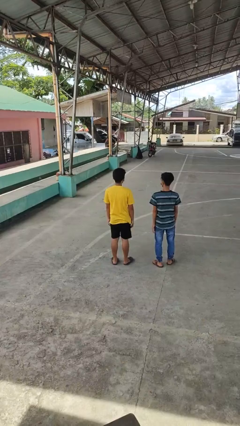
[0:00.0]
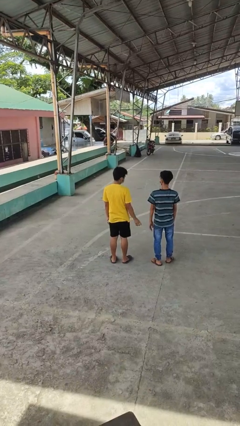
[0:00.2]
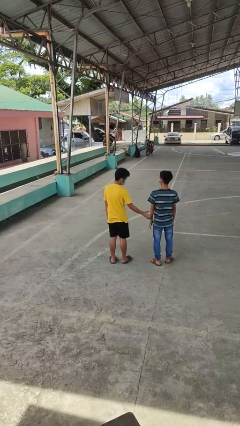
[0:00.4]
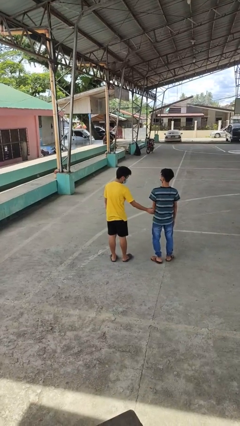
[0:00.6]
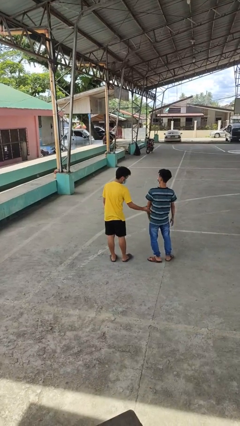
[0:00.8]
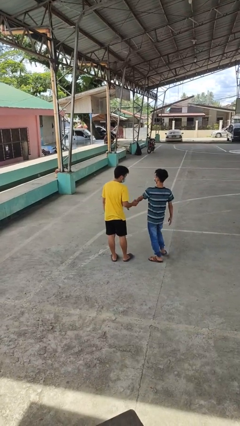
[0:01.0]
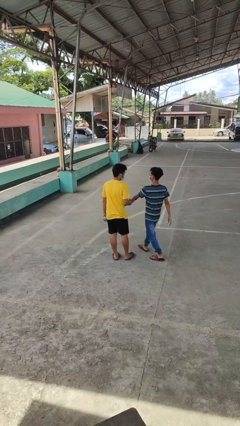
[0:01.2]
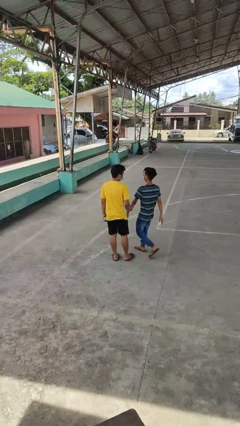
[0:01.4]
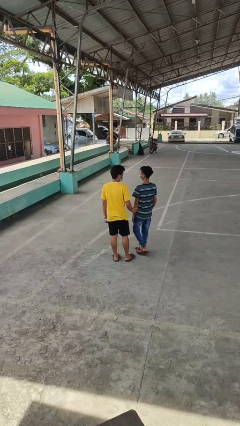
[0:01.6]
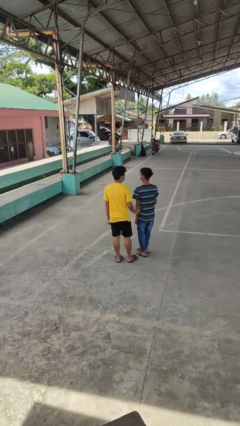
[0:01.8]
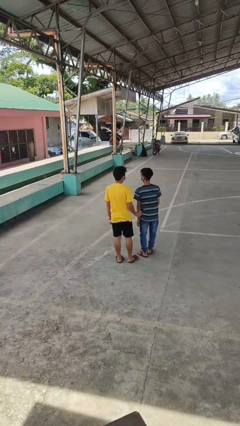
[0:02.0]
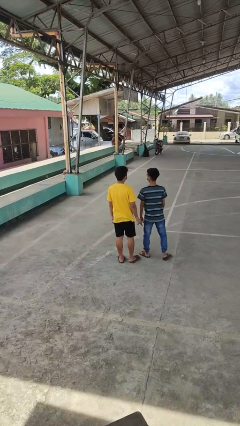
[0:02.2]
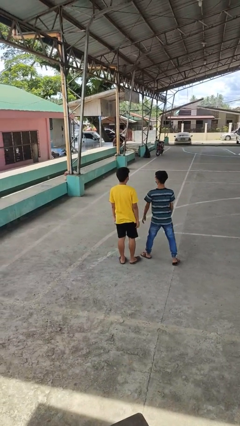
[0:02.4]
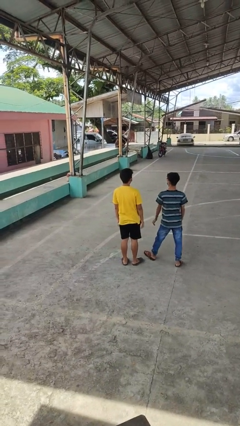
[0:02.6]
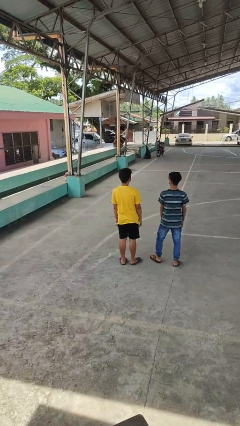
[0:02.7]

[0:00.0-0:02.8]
person grabs person by forearm

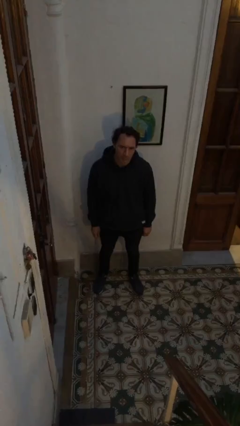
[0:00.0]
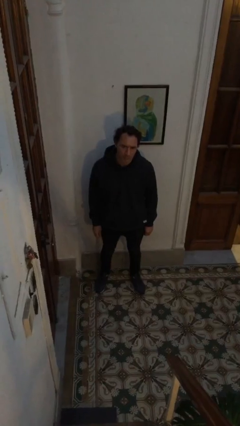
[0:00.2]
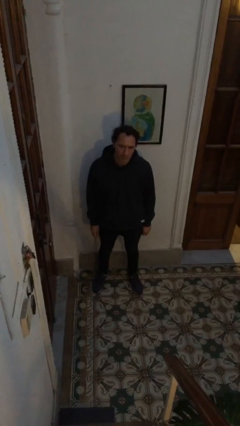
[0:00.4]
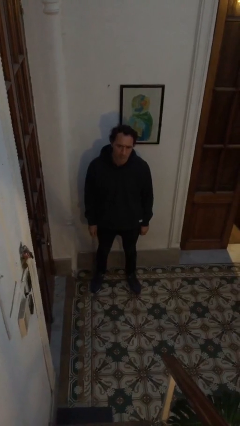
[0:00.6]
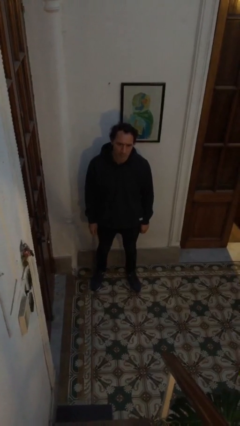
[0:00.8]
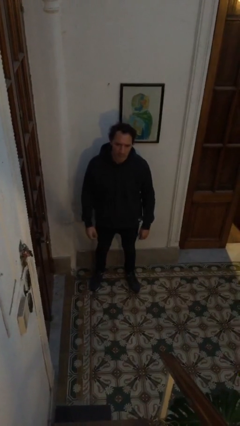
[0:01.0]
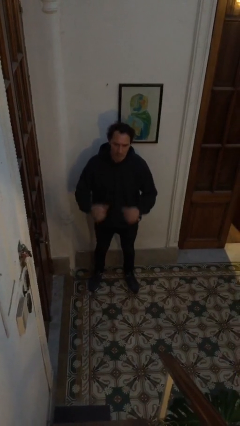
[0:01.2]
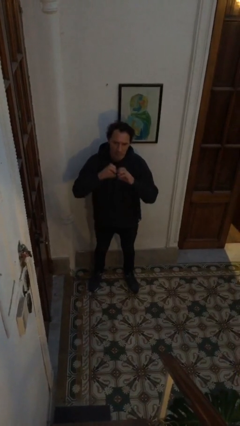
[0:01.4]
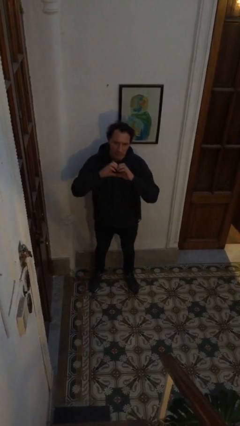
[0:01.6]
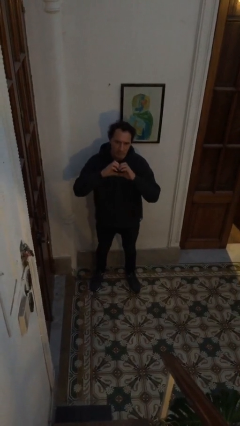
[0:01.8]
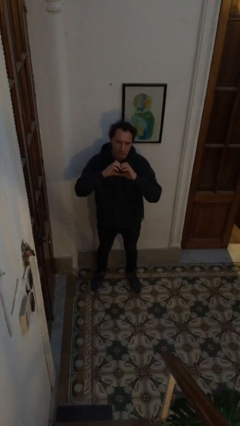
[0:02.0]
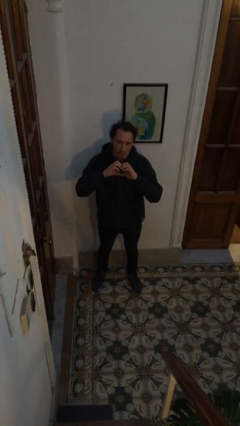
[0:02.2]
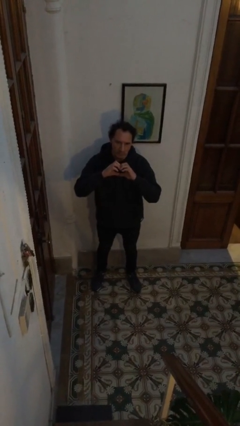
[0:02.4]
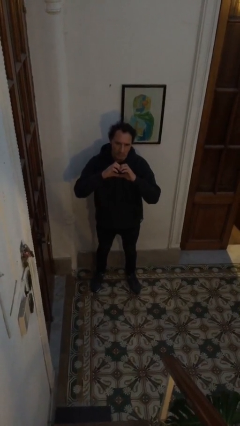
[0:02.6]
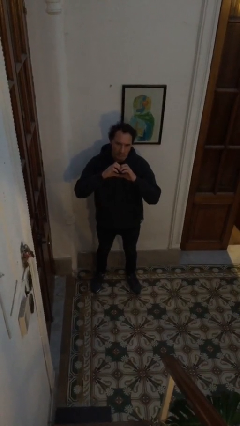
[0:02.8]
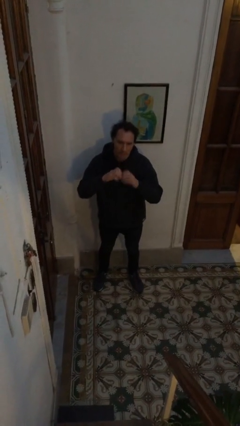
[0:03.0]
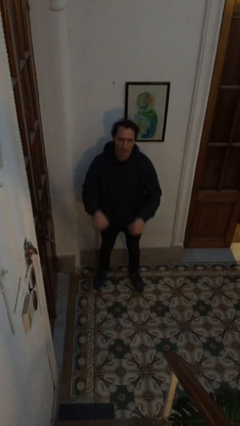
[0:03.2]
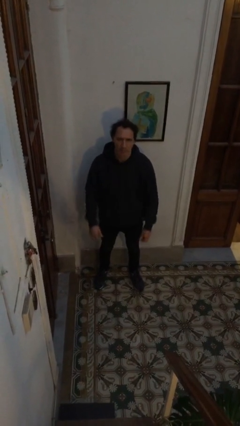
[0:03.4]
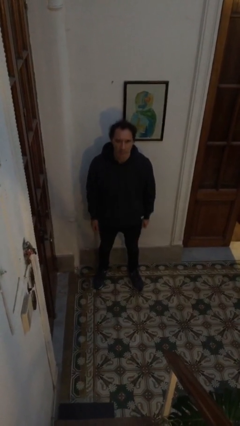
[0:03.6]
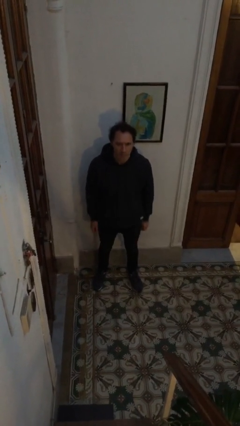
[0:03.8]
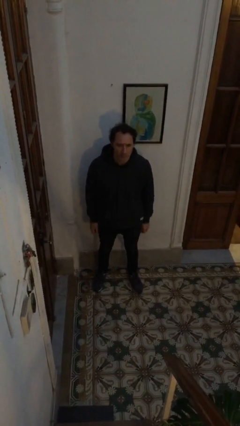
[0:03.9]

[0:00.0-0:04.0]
person gestures heart

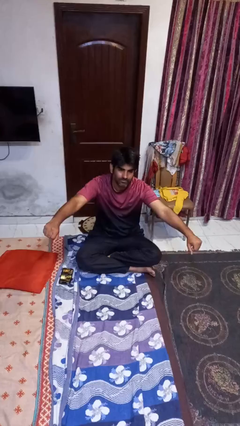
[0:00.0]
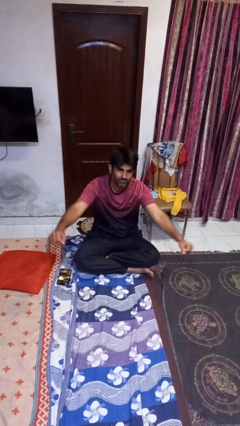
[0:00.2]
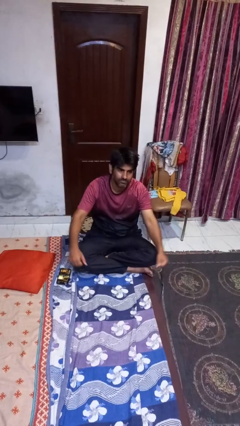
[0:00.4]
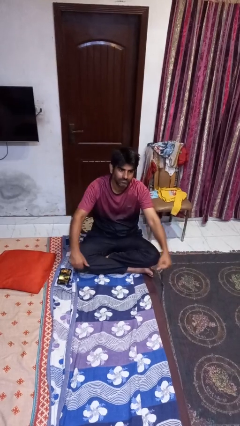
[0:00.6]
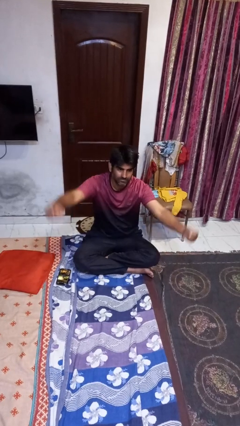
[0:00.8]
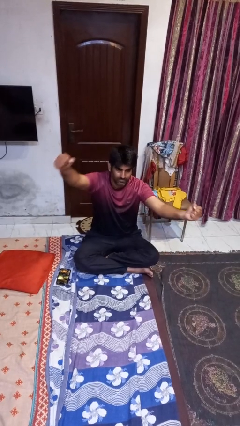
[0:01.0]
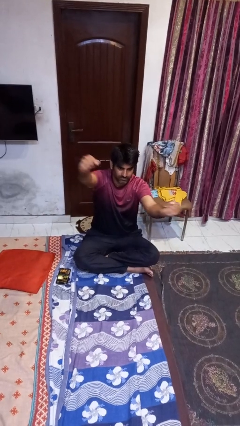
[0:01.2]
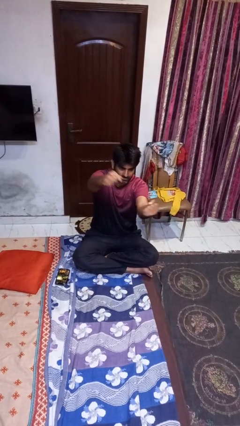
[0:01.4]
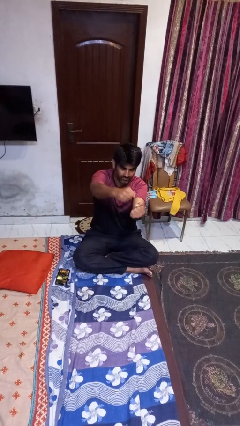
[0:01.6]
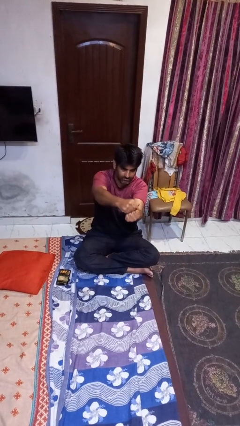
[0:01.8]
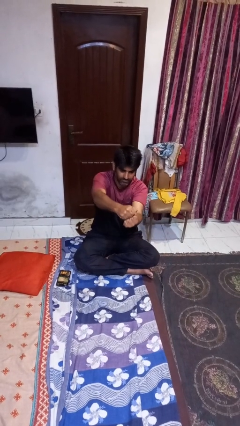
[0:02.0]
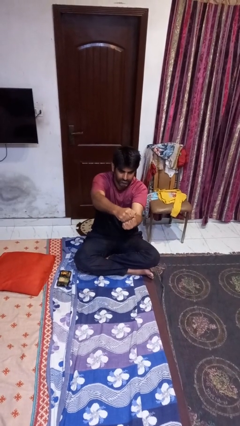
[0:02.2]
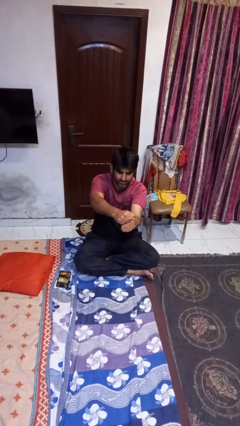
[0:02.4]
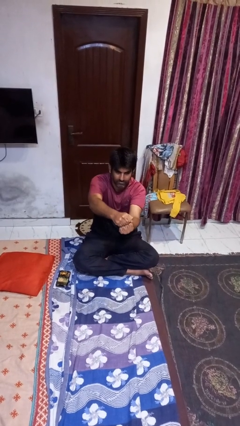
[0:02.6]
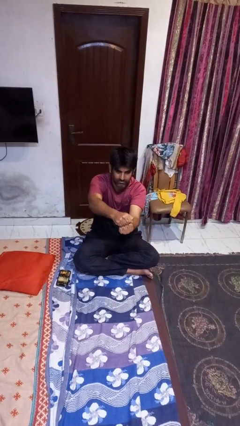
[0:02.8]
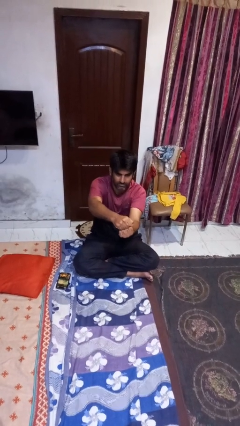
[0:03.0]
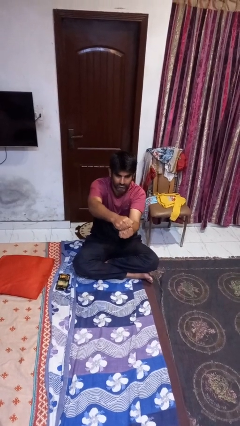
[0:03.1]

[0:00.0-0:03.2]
person gestures zoom in

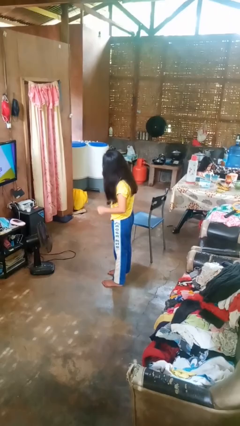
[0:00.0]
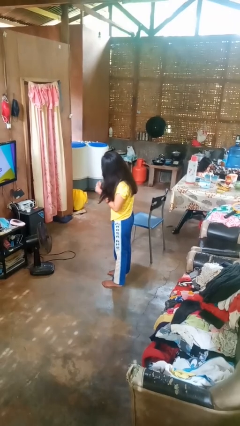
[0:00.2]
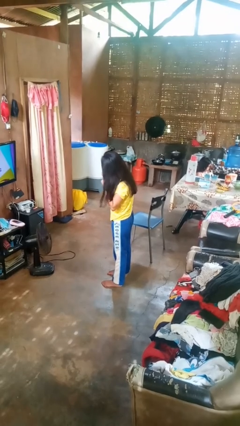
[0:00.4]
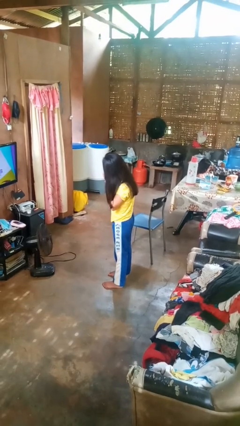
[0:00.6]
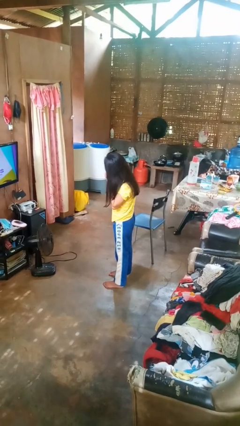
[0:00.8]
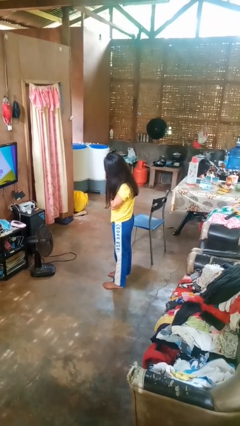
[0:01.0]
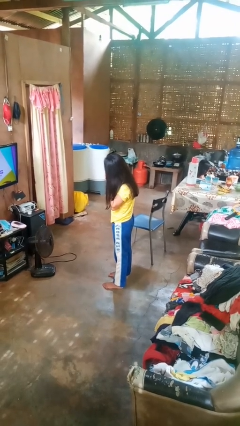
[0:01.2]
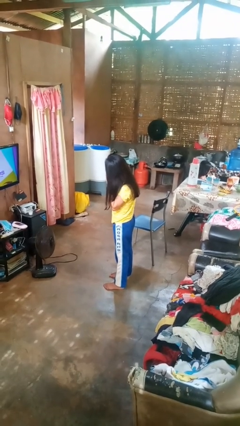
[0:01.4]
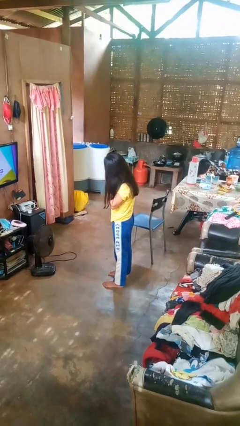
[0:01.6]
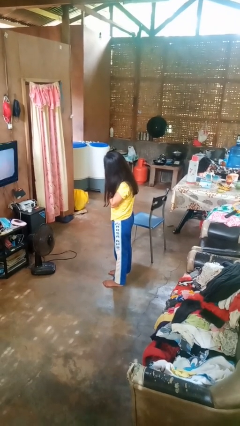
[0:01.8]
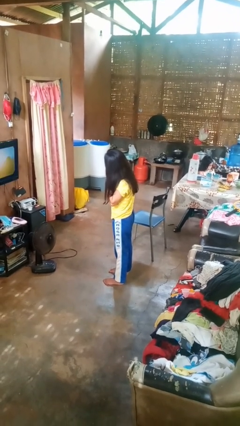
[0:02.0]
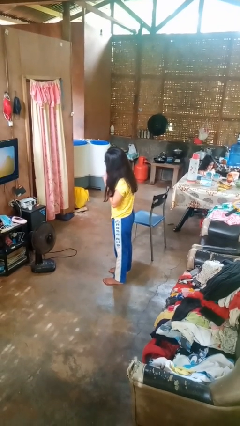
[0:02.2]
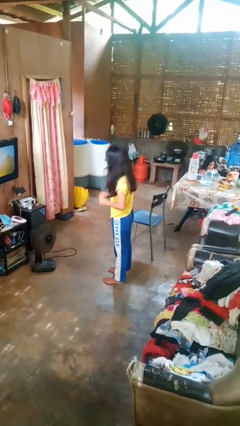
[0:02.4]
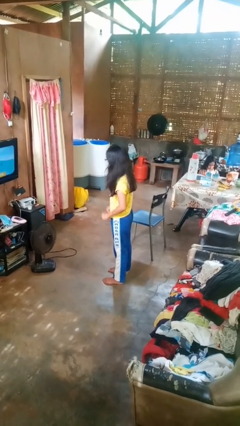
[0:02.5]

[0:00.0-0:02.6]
person puts on earrings

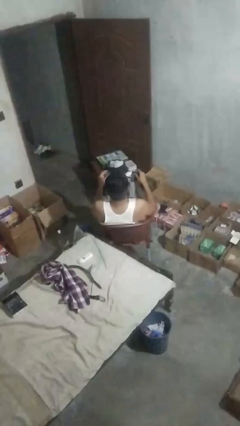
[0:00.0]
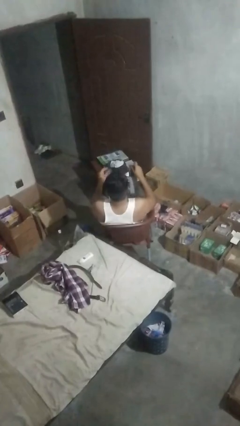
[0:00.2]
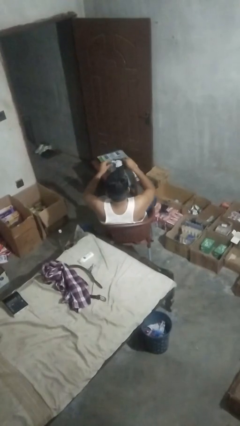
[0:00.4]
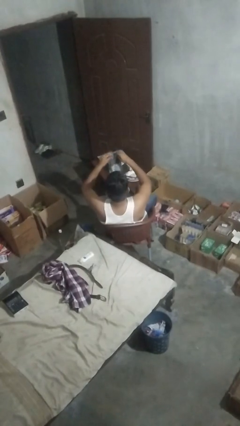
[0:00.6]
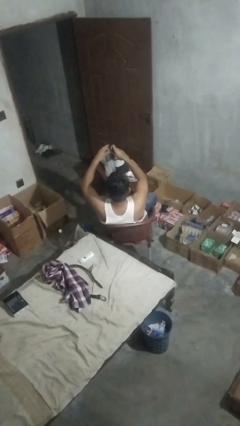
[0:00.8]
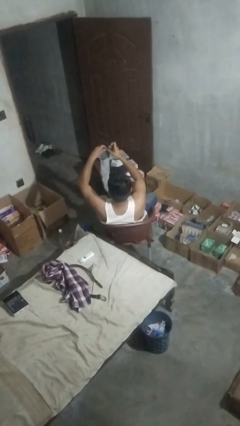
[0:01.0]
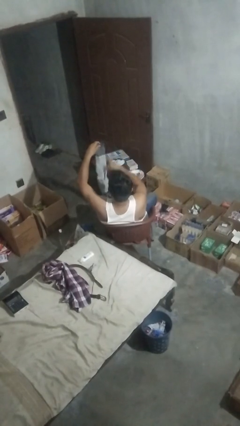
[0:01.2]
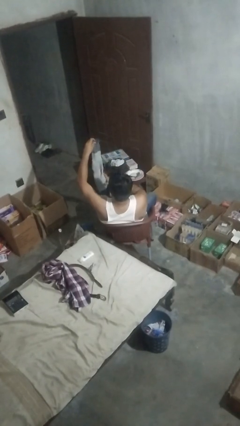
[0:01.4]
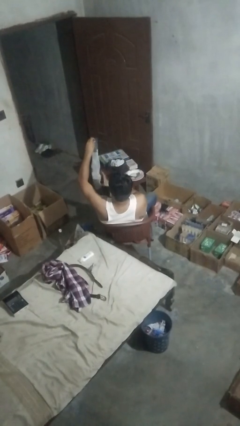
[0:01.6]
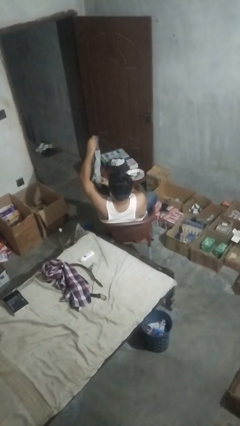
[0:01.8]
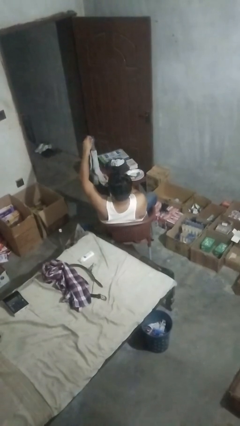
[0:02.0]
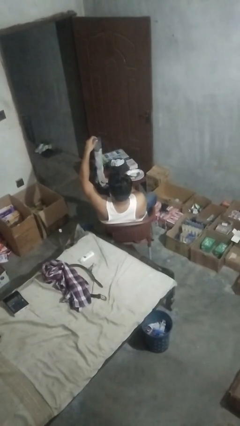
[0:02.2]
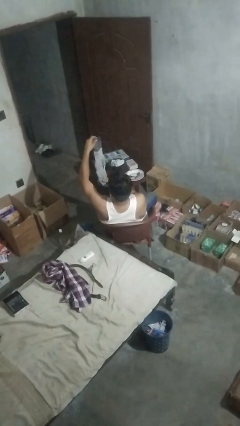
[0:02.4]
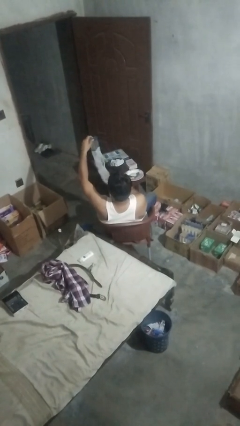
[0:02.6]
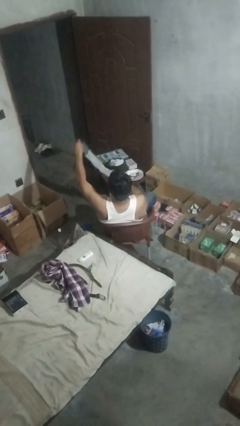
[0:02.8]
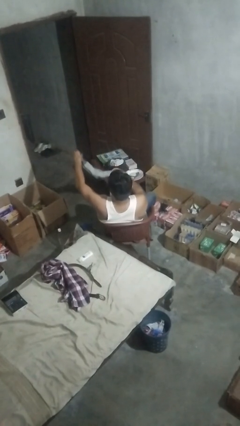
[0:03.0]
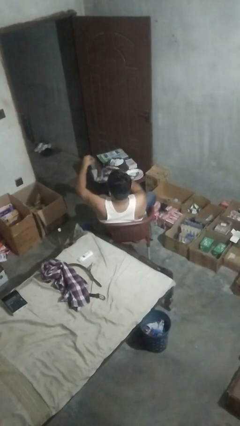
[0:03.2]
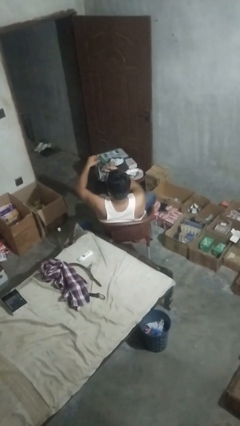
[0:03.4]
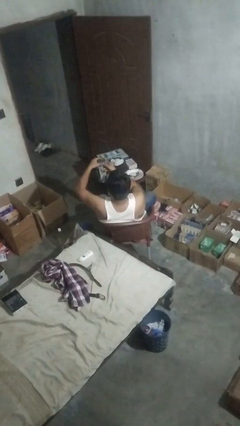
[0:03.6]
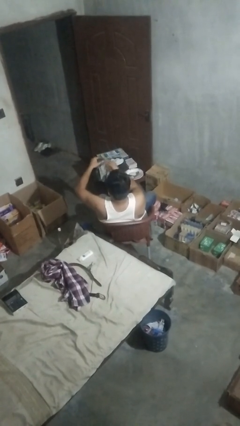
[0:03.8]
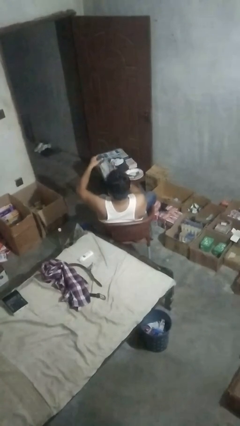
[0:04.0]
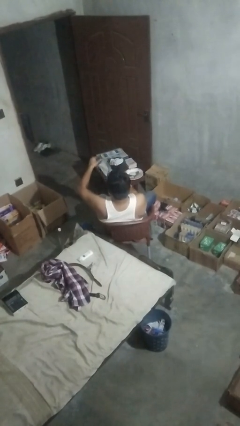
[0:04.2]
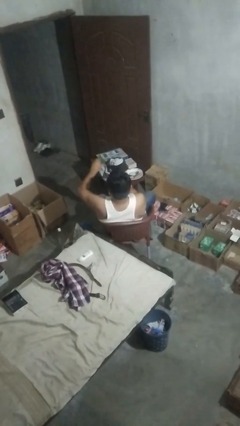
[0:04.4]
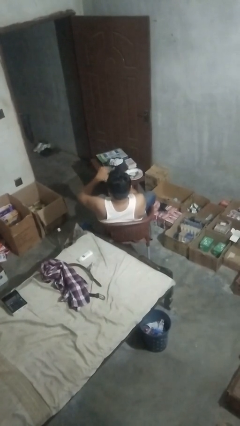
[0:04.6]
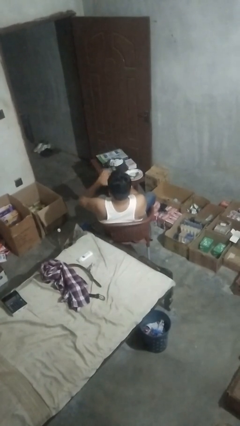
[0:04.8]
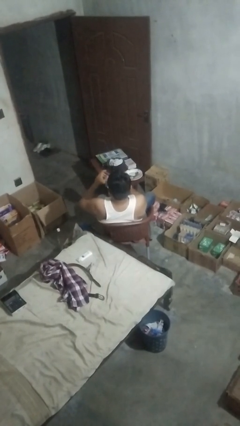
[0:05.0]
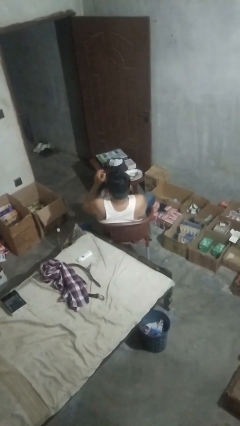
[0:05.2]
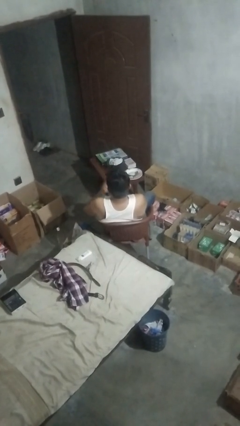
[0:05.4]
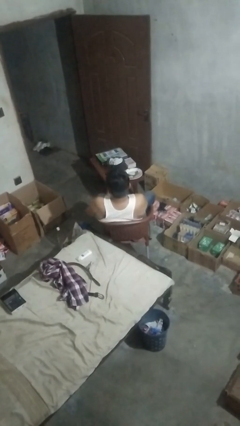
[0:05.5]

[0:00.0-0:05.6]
person folds socks
